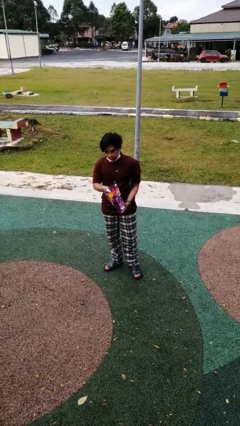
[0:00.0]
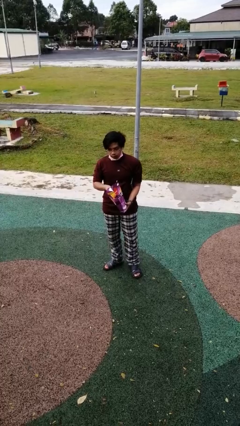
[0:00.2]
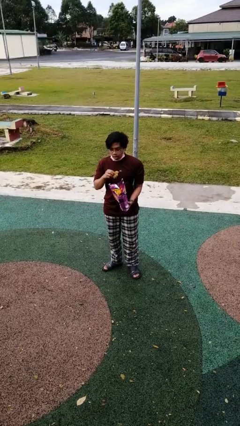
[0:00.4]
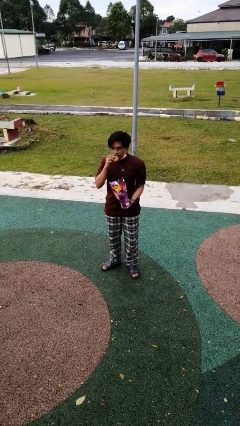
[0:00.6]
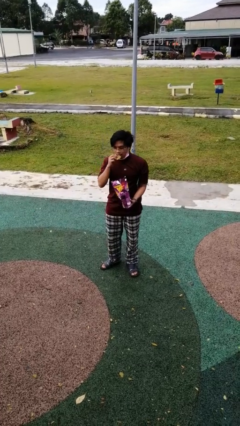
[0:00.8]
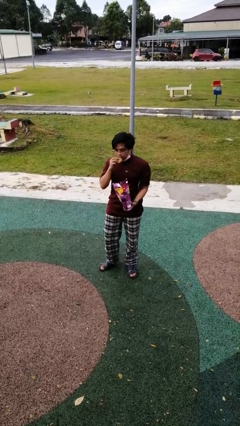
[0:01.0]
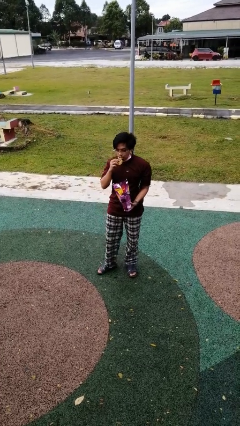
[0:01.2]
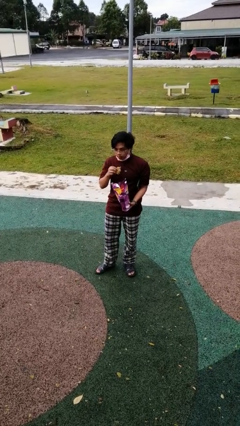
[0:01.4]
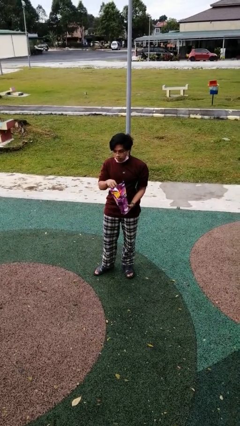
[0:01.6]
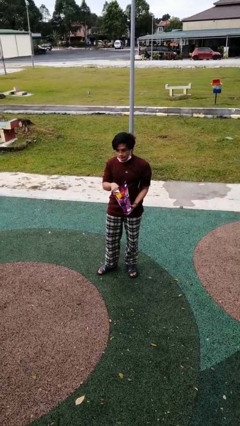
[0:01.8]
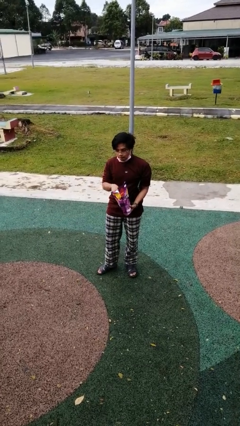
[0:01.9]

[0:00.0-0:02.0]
person eats snack from bag

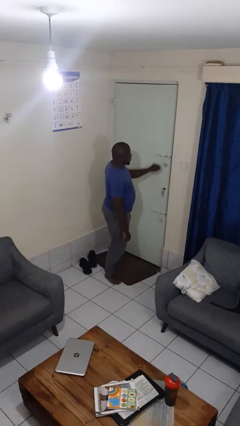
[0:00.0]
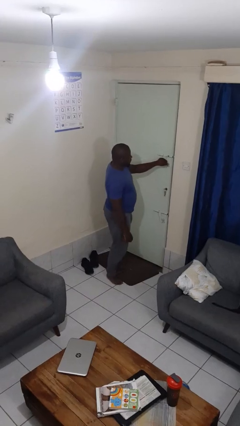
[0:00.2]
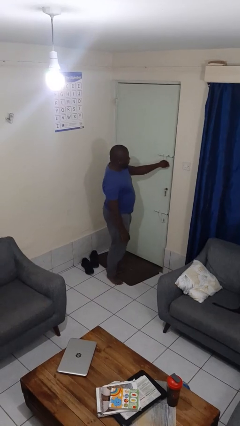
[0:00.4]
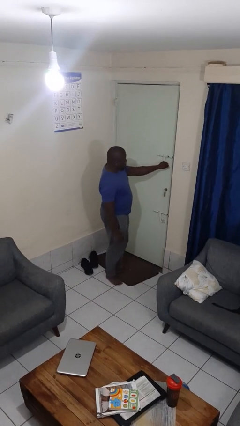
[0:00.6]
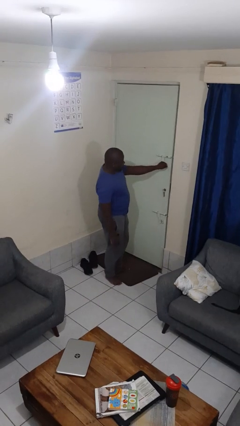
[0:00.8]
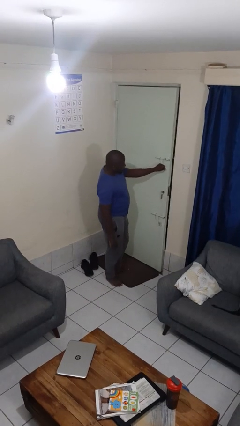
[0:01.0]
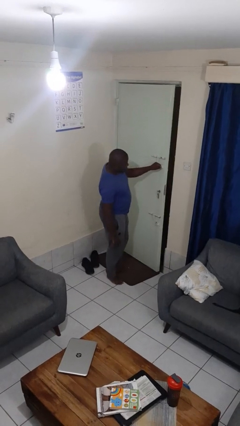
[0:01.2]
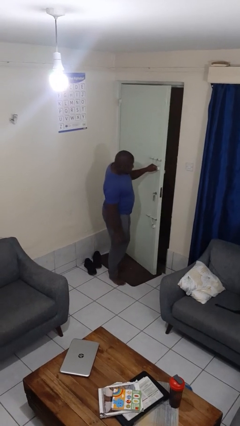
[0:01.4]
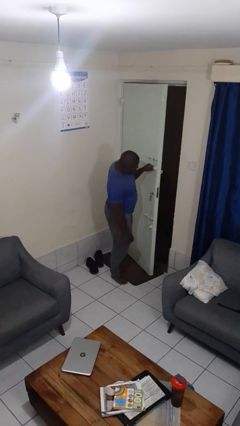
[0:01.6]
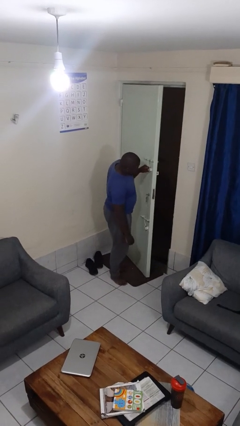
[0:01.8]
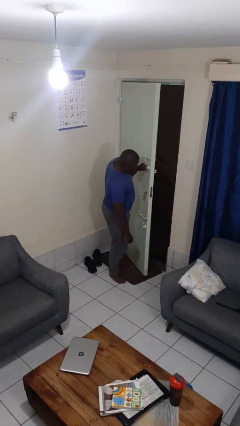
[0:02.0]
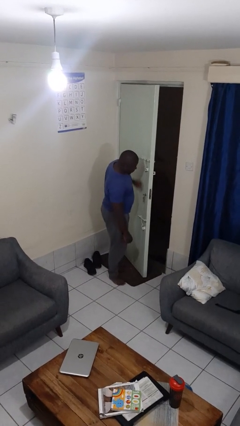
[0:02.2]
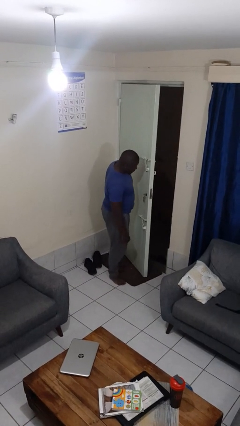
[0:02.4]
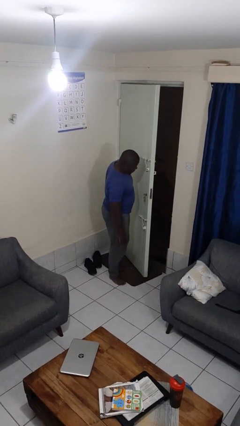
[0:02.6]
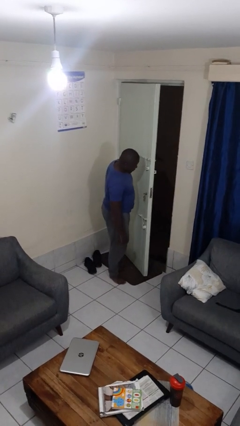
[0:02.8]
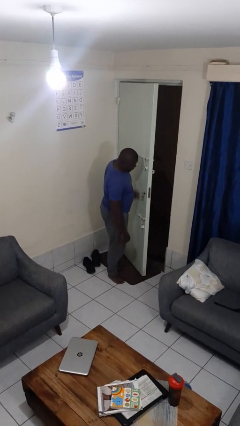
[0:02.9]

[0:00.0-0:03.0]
person opens facility door

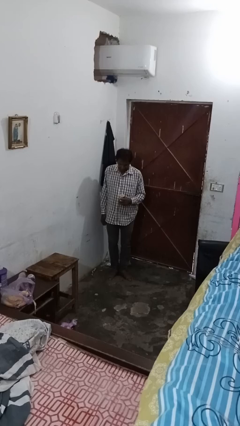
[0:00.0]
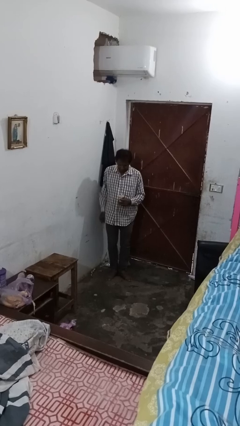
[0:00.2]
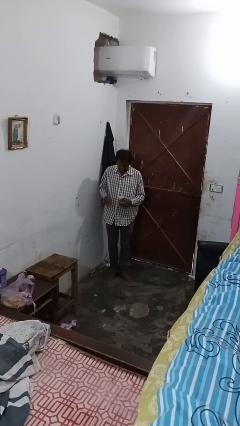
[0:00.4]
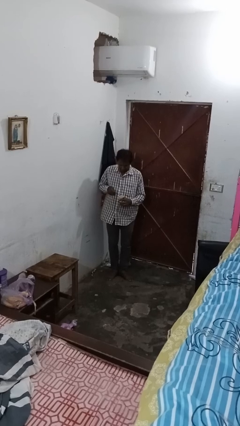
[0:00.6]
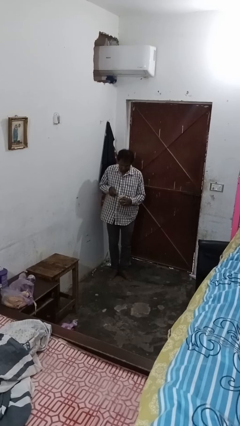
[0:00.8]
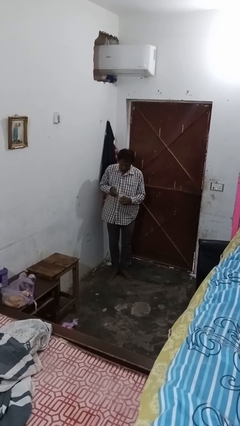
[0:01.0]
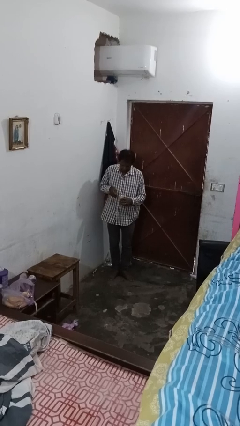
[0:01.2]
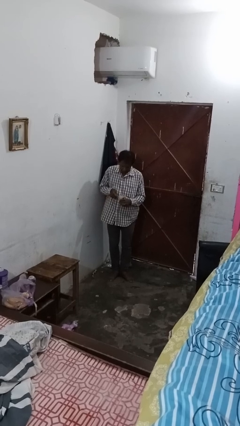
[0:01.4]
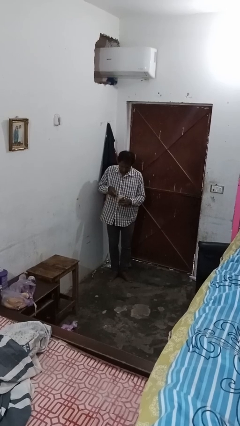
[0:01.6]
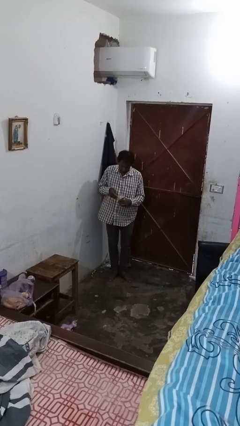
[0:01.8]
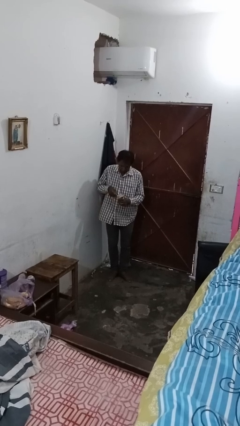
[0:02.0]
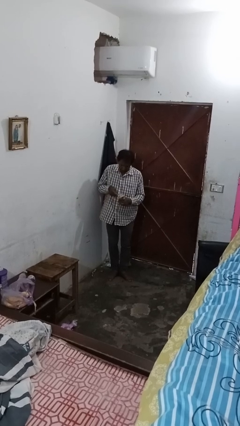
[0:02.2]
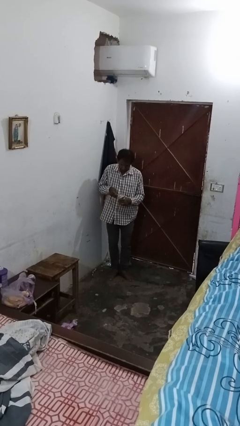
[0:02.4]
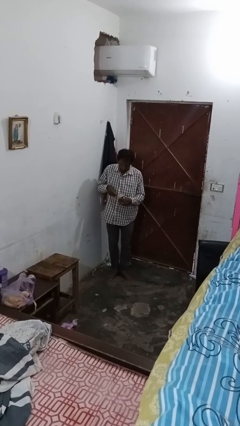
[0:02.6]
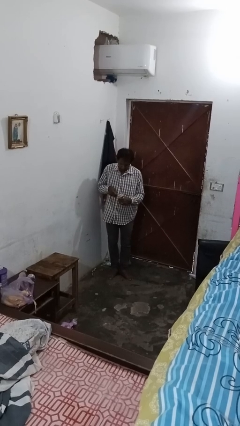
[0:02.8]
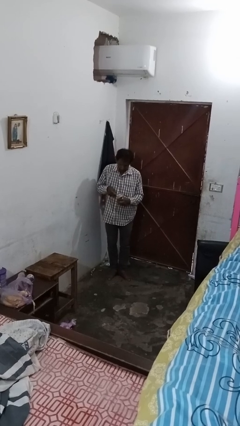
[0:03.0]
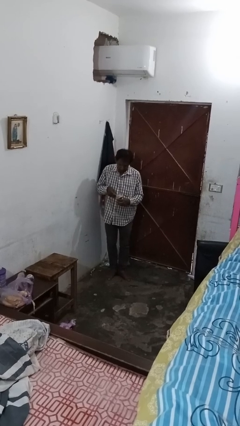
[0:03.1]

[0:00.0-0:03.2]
person opens can with can opener

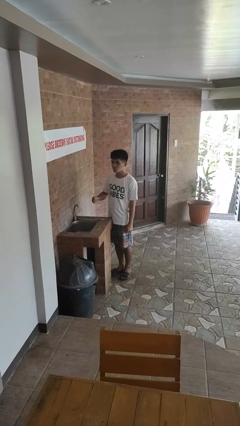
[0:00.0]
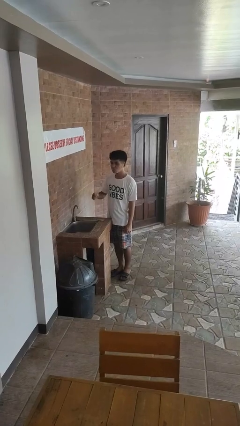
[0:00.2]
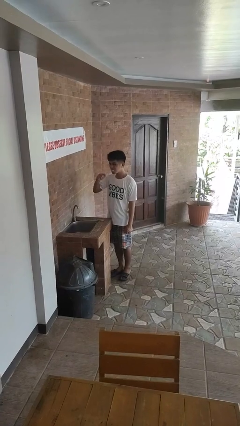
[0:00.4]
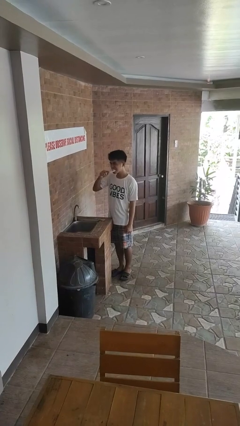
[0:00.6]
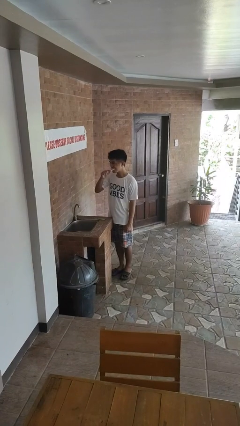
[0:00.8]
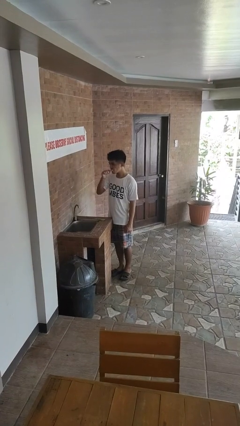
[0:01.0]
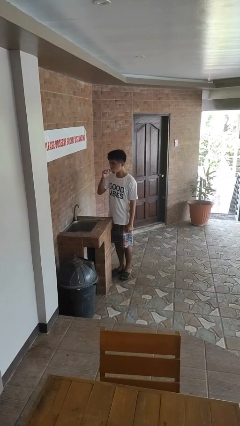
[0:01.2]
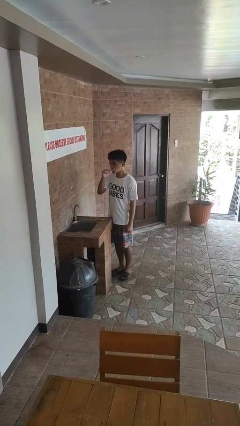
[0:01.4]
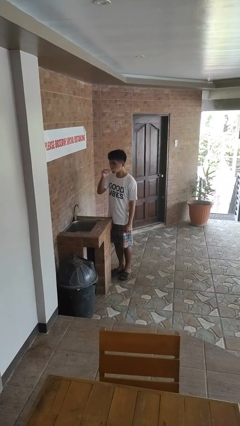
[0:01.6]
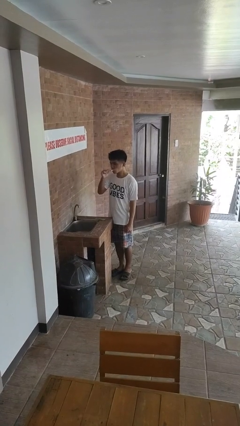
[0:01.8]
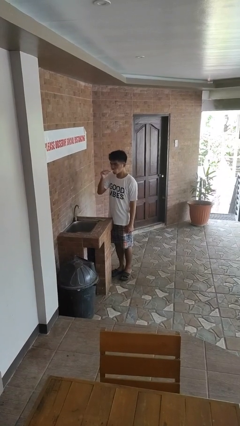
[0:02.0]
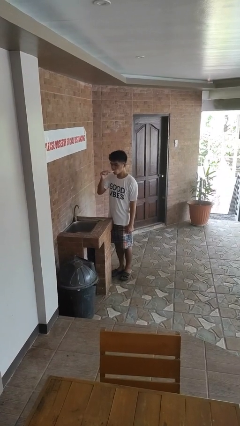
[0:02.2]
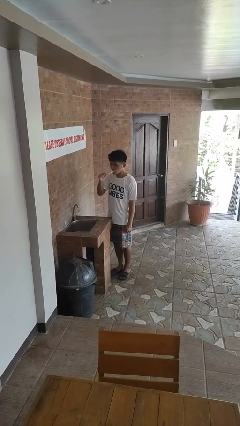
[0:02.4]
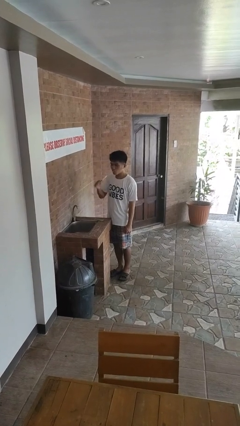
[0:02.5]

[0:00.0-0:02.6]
person brushes teeth

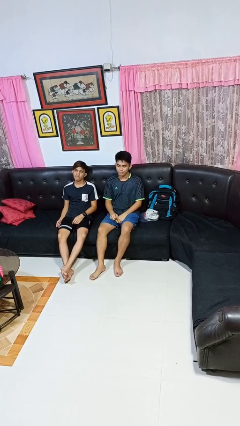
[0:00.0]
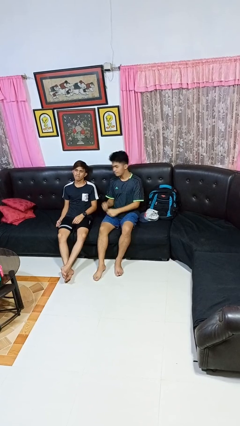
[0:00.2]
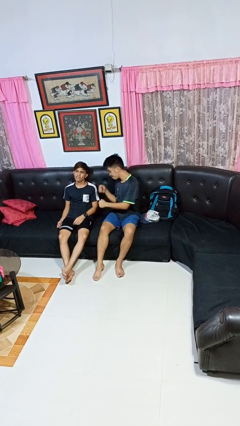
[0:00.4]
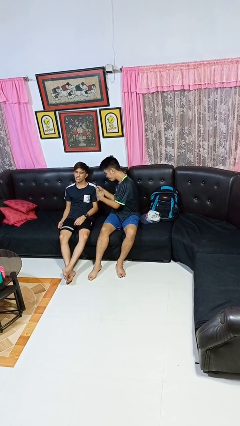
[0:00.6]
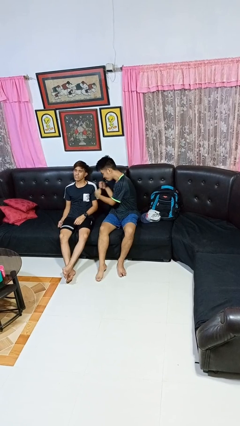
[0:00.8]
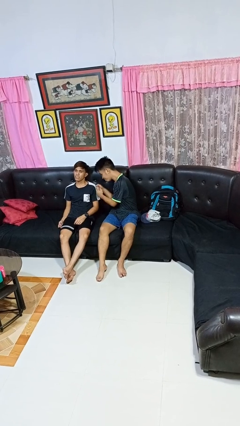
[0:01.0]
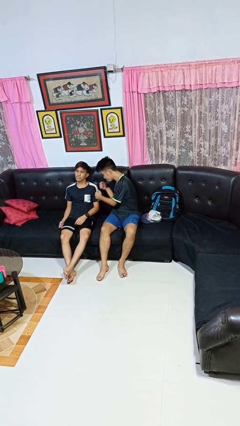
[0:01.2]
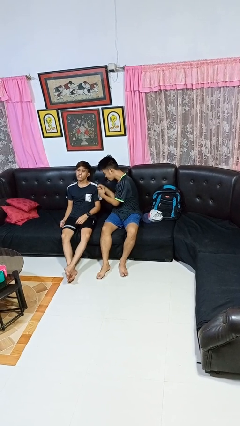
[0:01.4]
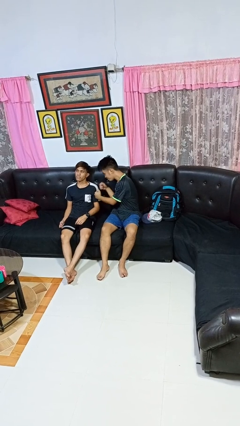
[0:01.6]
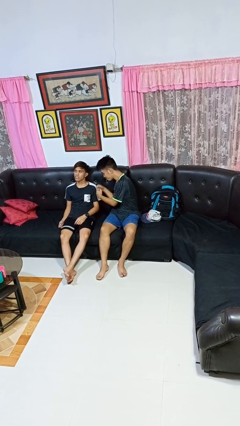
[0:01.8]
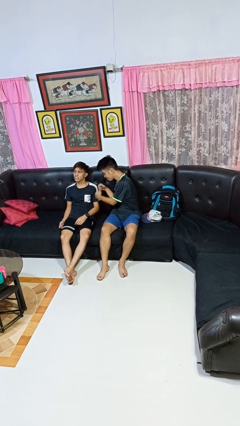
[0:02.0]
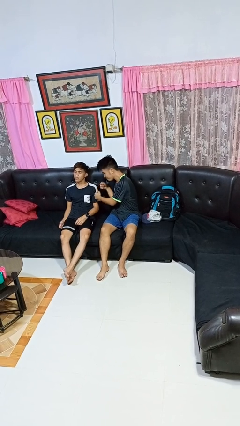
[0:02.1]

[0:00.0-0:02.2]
person pounds shoulders of person

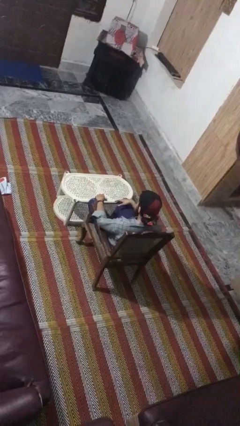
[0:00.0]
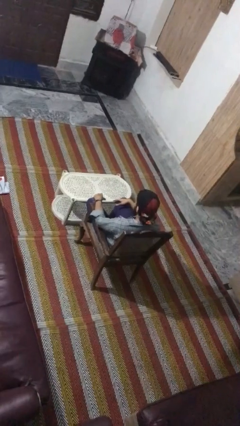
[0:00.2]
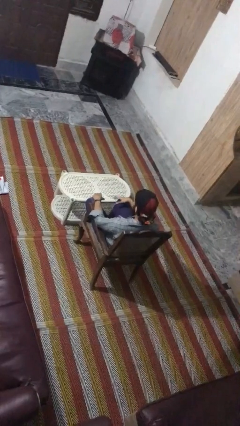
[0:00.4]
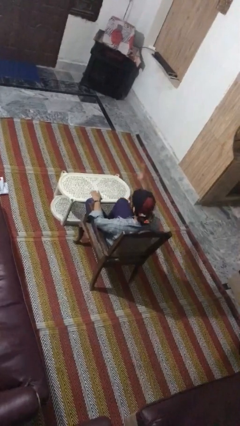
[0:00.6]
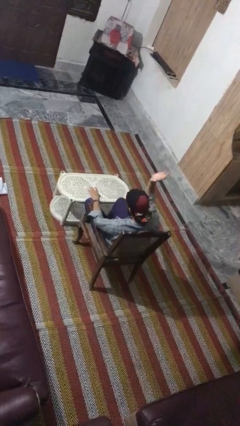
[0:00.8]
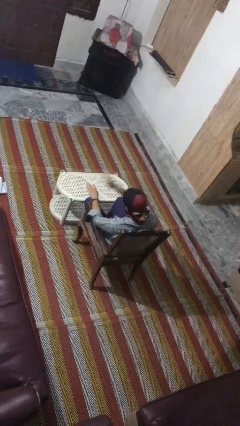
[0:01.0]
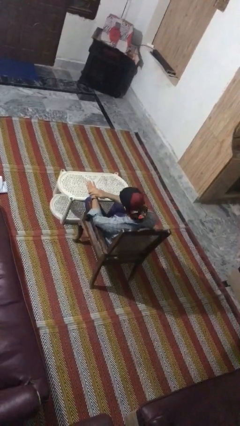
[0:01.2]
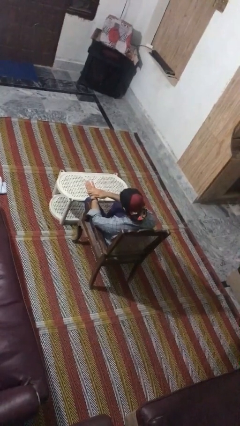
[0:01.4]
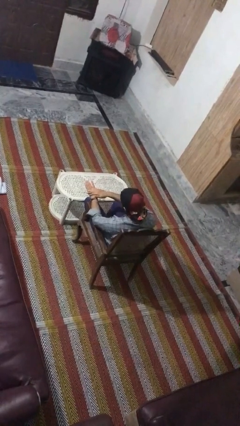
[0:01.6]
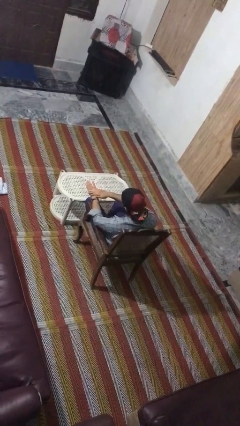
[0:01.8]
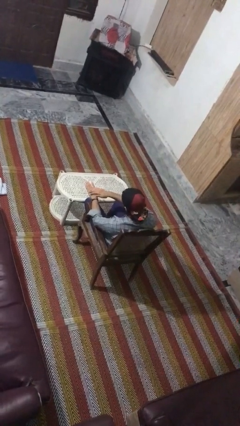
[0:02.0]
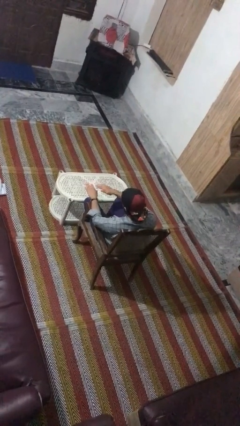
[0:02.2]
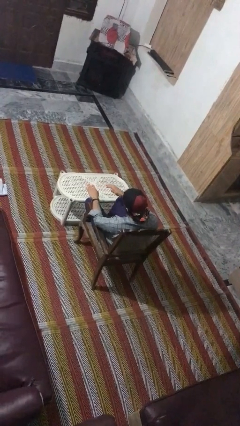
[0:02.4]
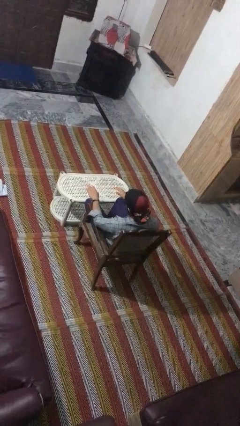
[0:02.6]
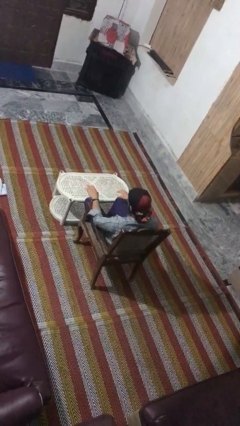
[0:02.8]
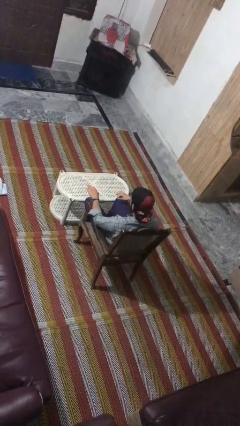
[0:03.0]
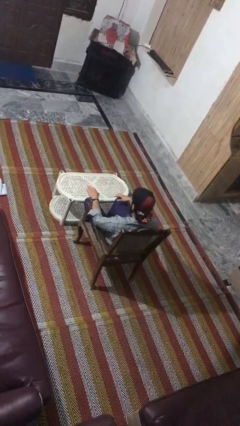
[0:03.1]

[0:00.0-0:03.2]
person swats bug

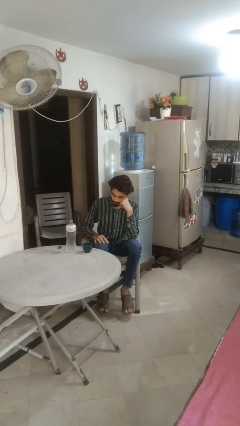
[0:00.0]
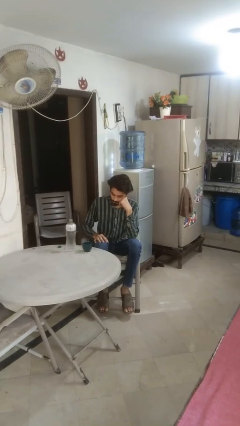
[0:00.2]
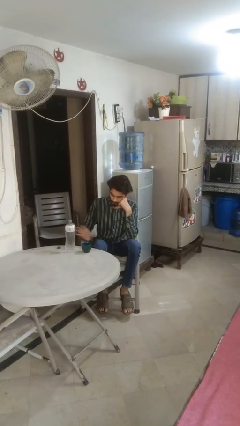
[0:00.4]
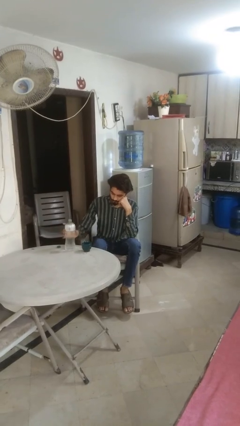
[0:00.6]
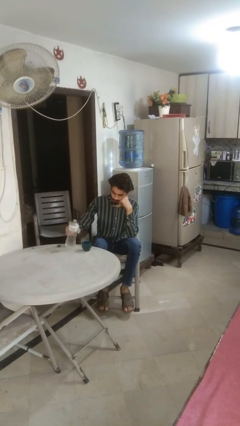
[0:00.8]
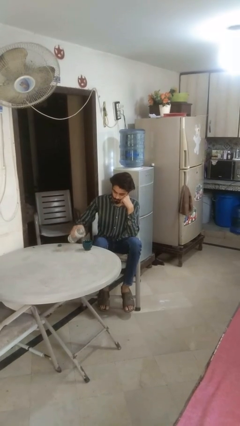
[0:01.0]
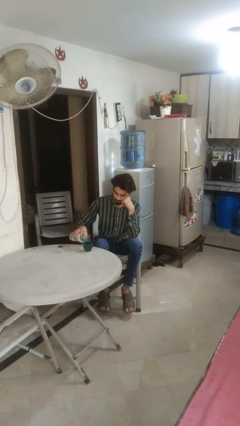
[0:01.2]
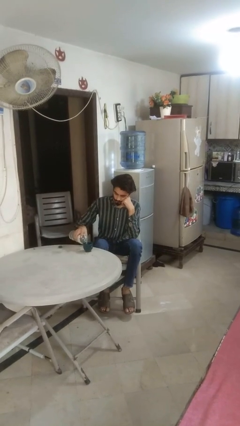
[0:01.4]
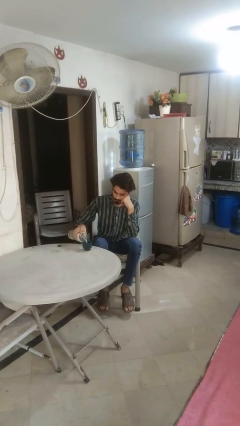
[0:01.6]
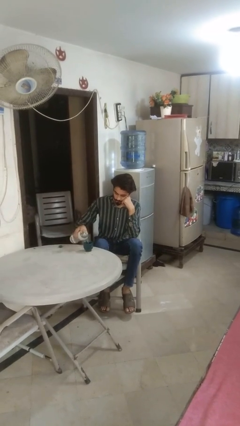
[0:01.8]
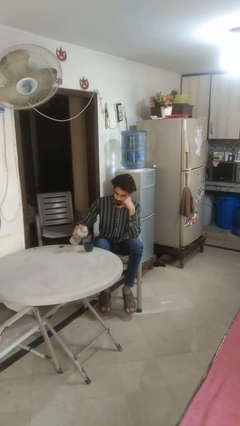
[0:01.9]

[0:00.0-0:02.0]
person pours liquid into cup
